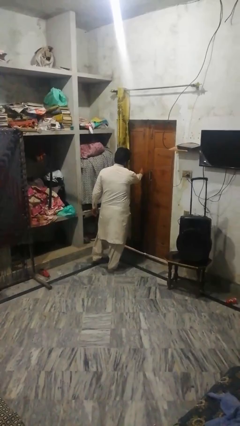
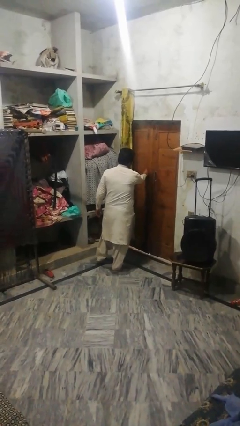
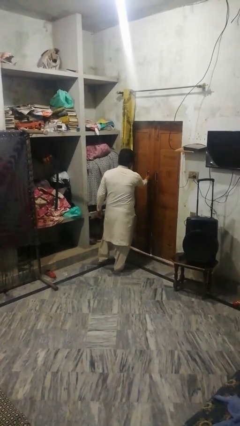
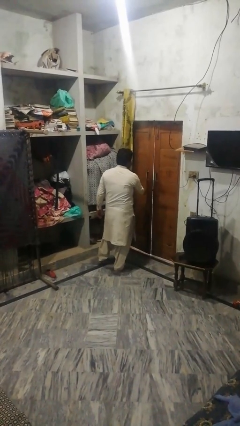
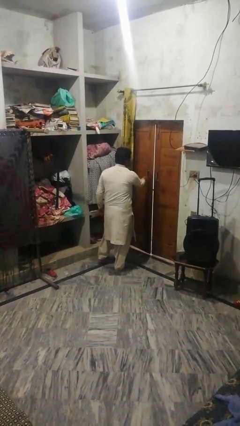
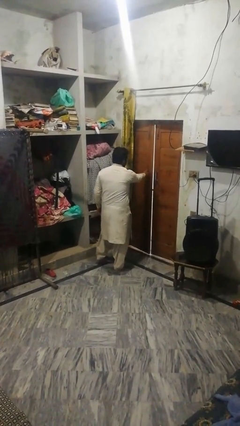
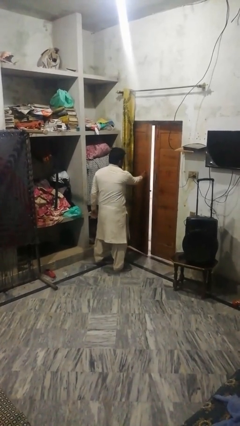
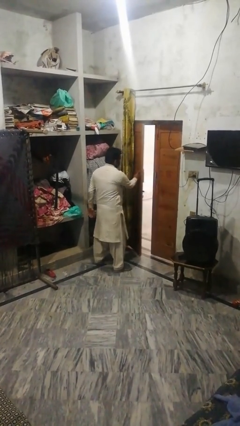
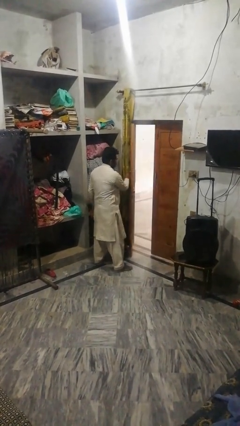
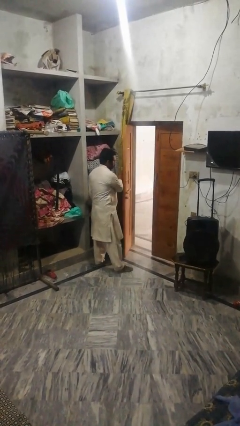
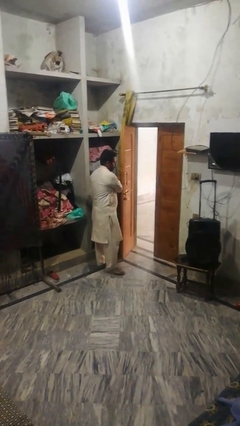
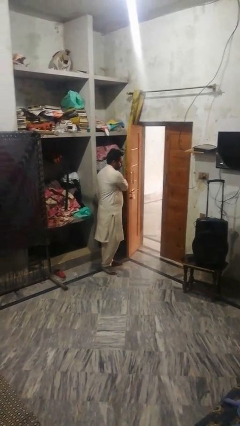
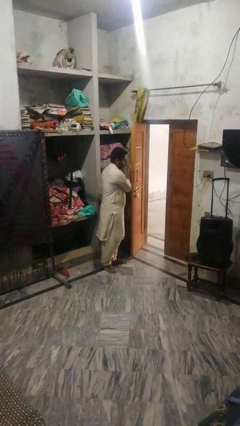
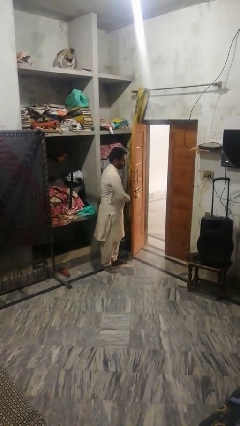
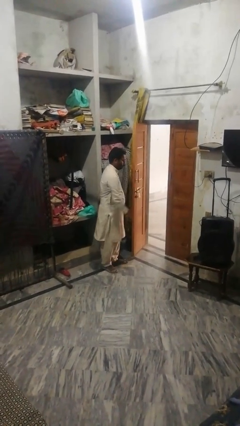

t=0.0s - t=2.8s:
person opens facility door

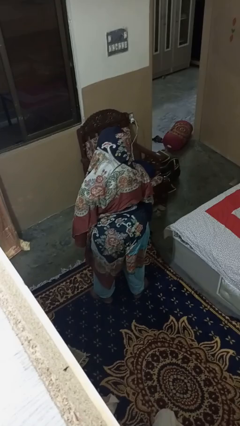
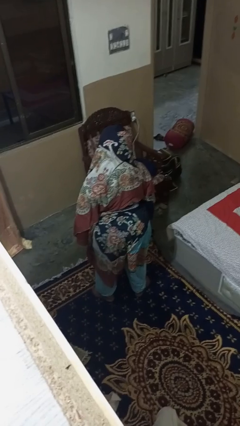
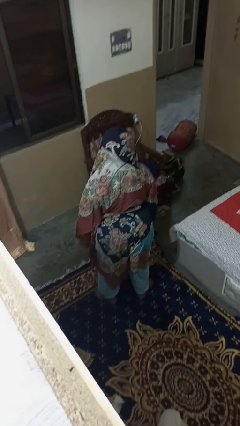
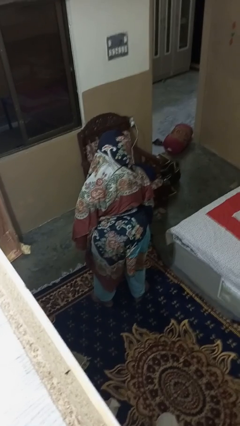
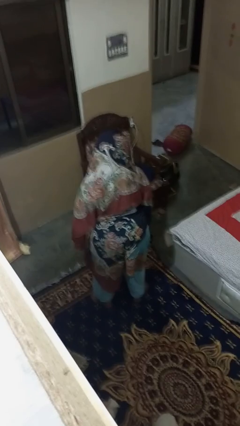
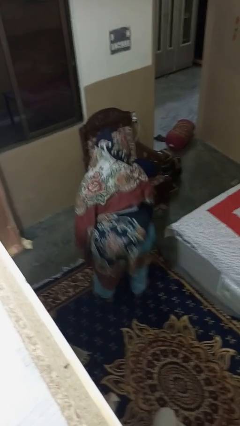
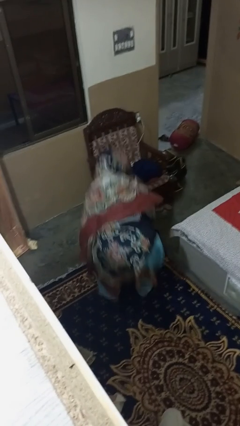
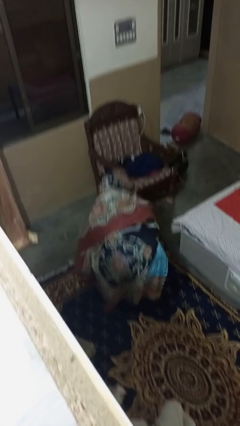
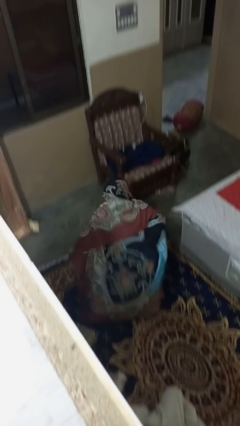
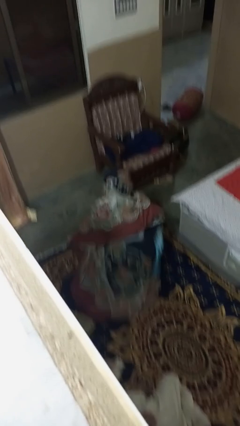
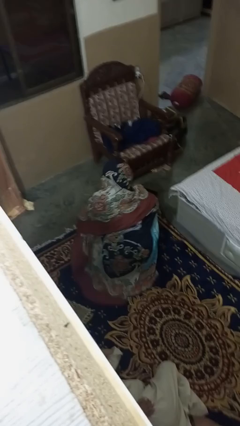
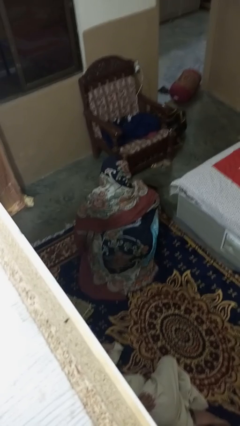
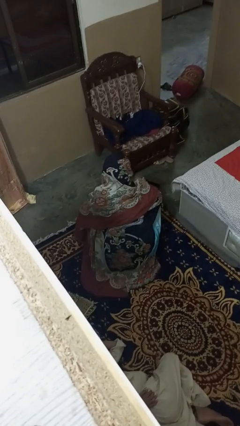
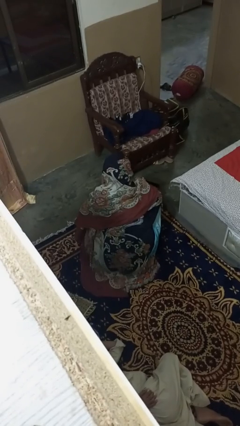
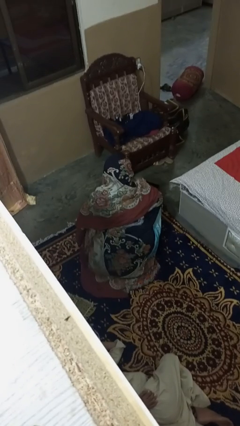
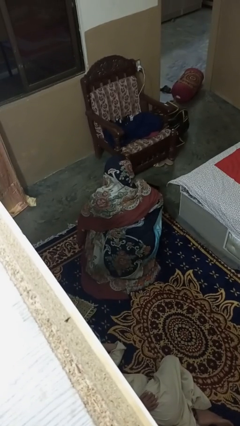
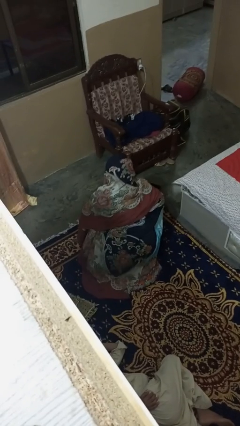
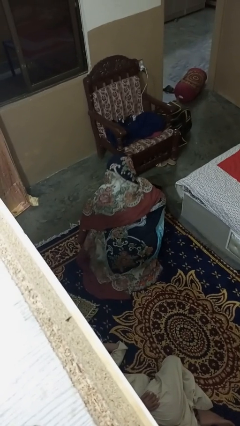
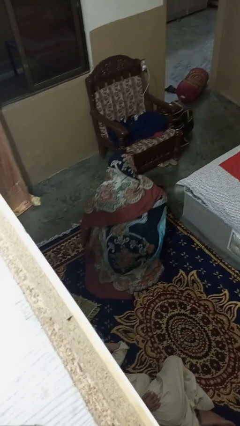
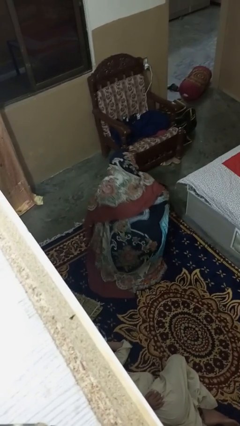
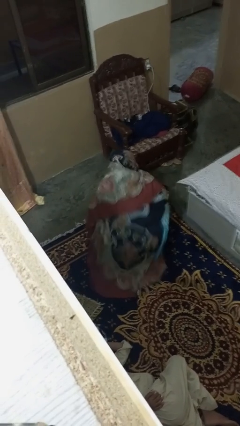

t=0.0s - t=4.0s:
person squats

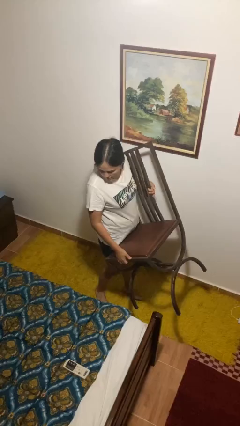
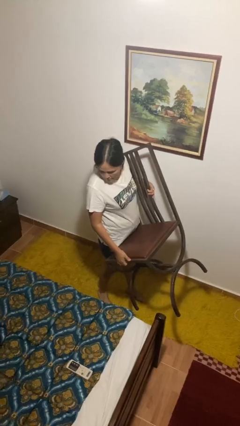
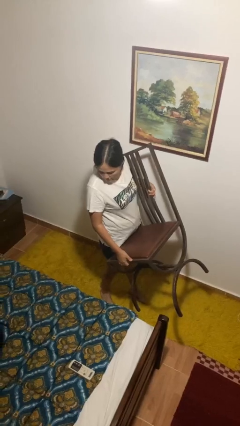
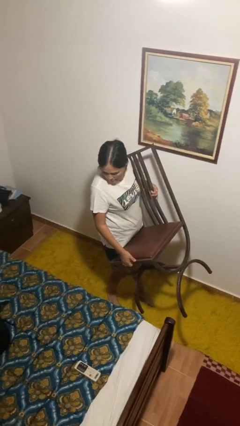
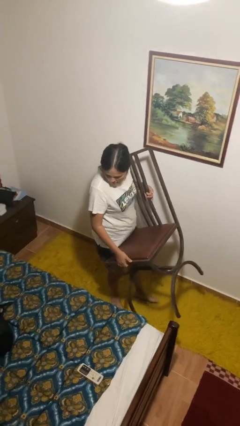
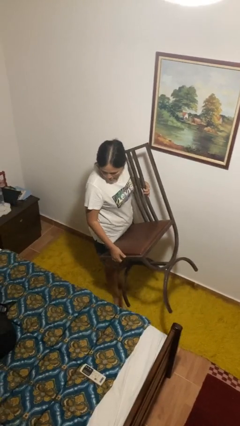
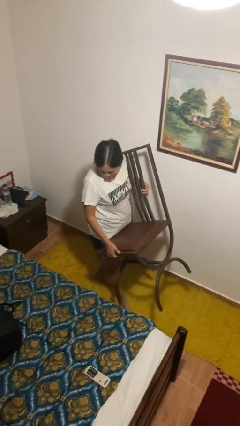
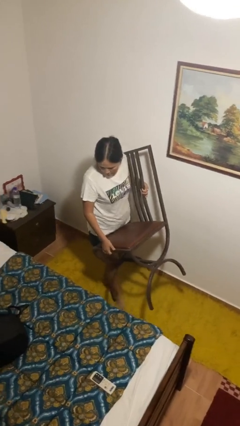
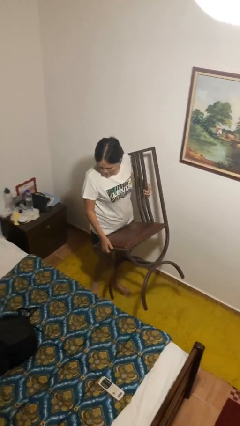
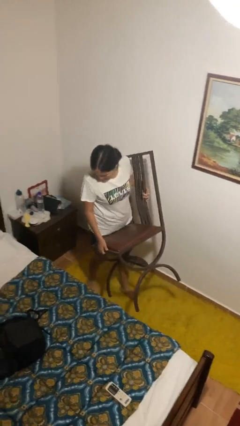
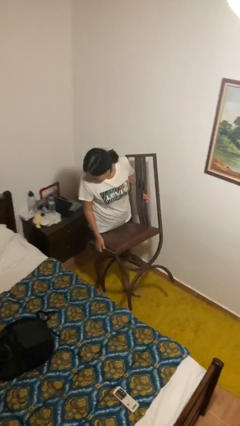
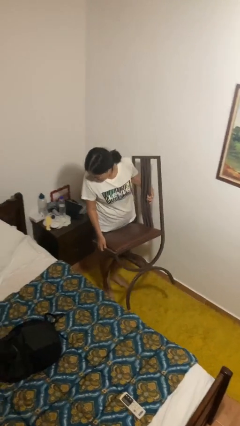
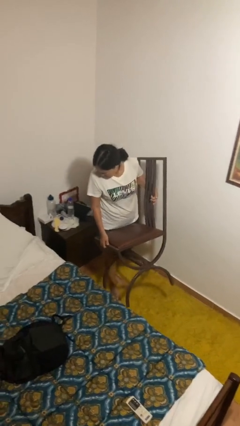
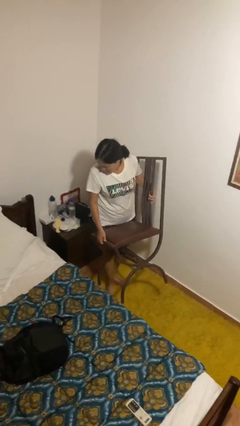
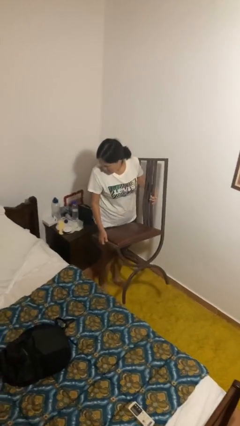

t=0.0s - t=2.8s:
person carries furniture

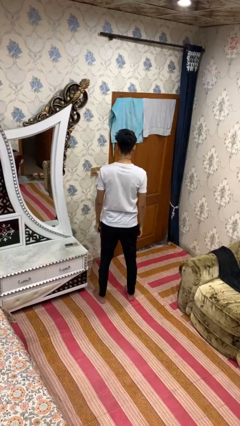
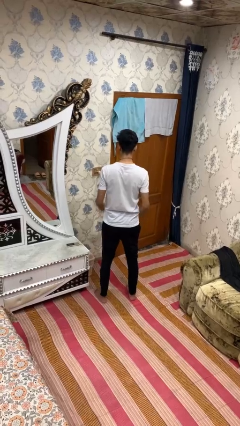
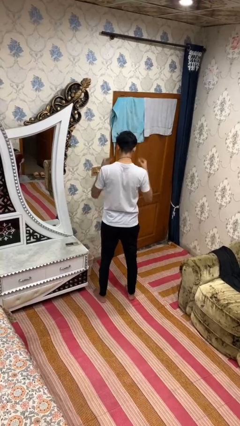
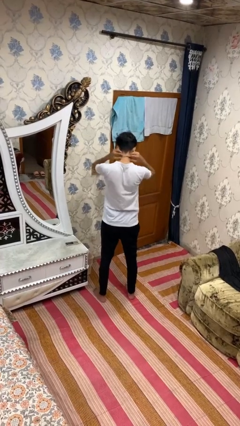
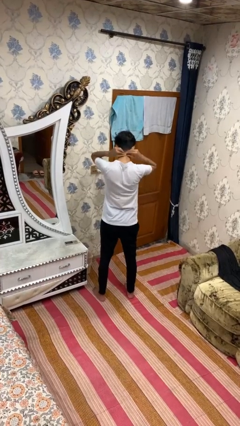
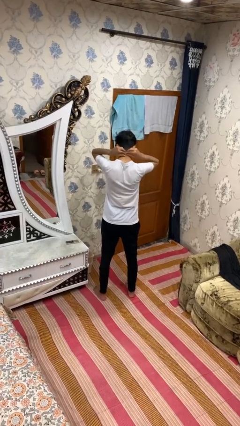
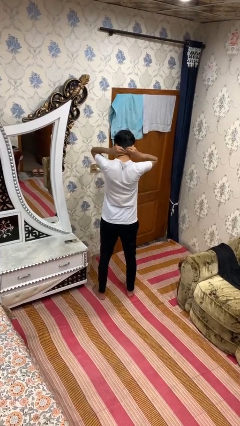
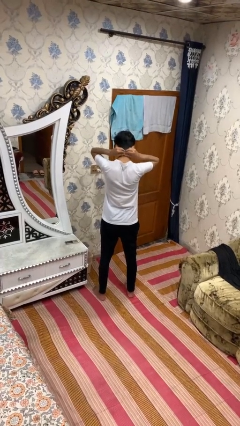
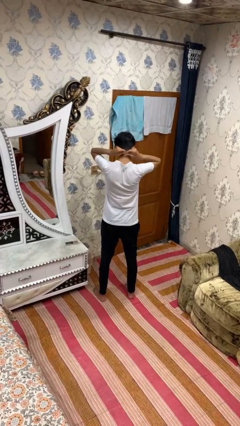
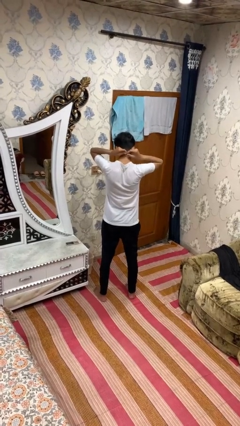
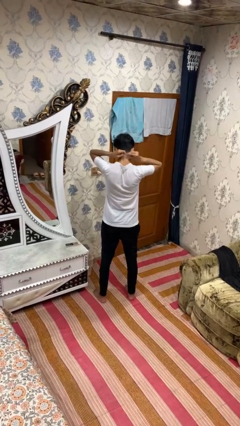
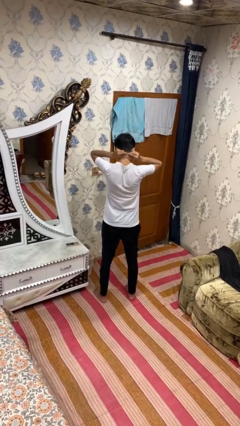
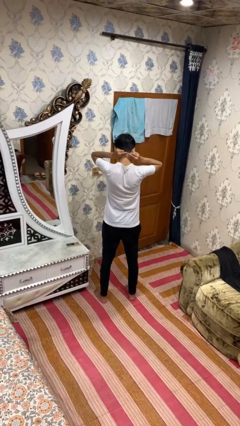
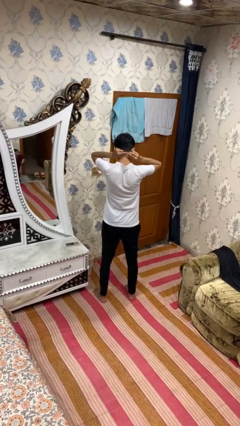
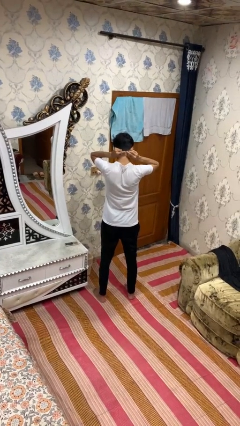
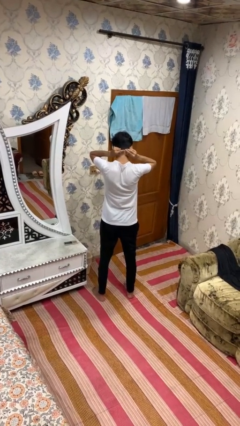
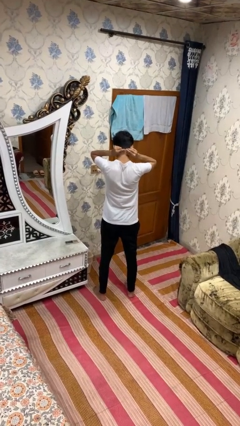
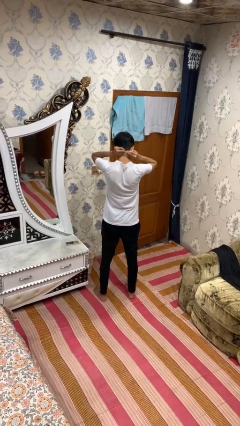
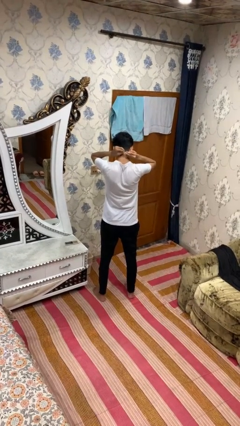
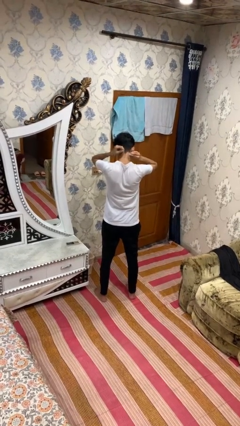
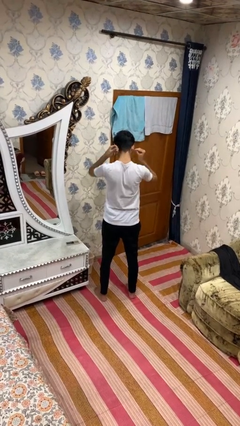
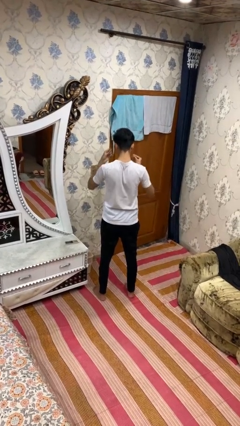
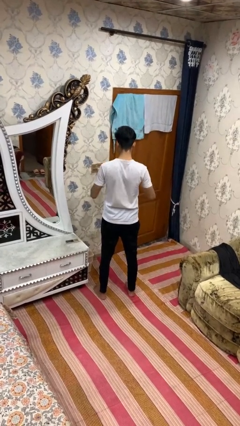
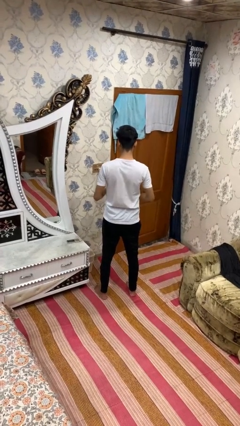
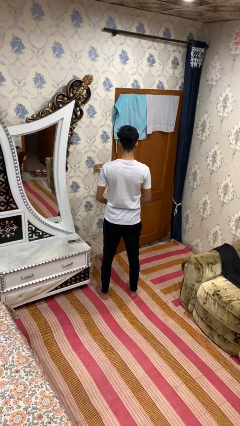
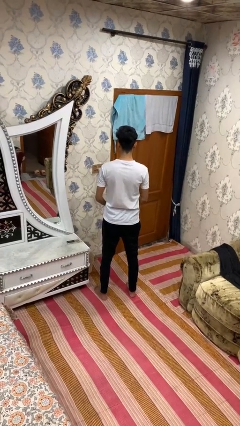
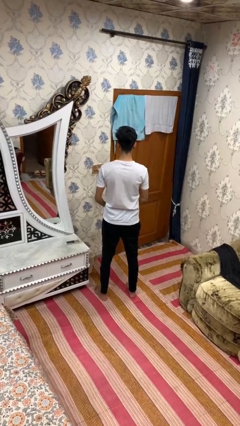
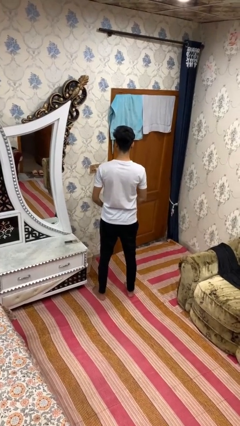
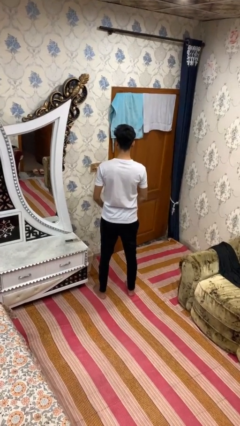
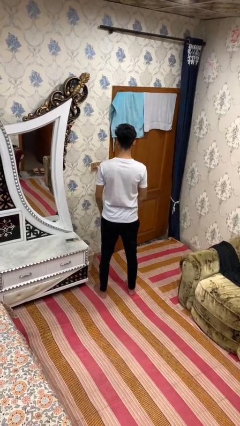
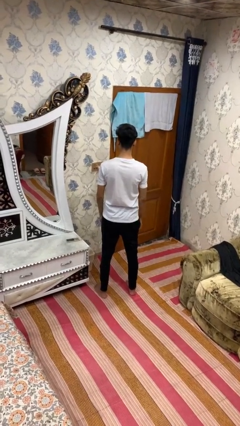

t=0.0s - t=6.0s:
person takes off necklace

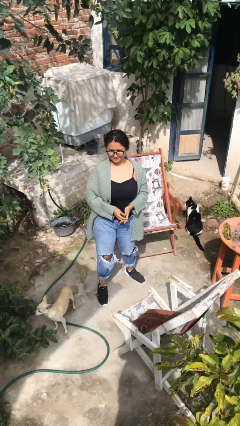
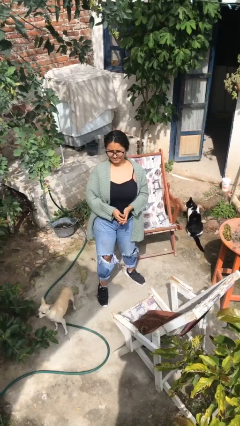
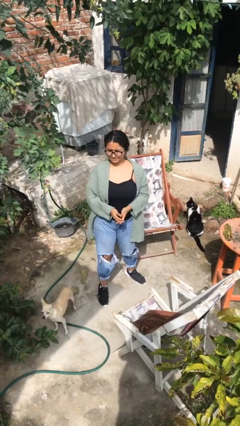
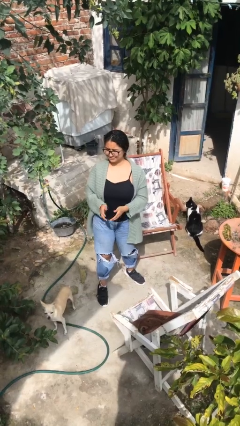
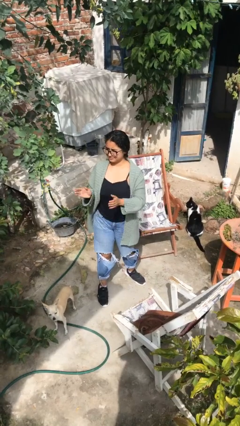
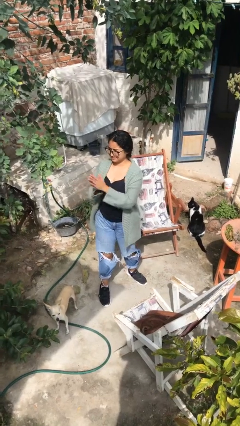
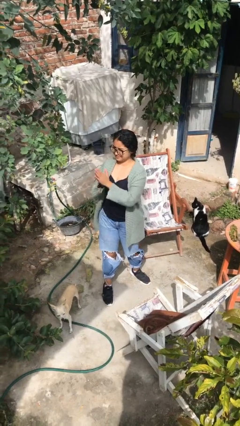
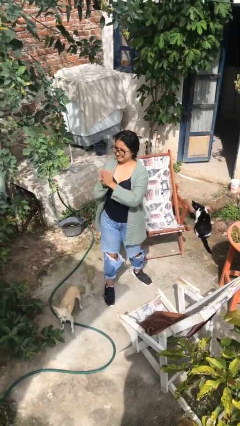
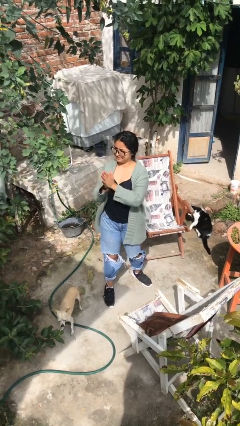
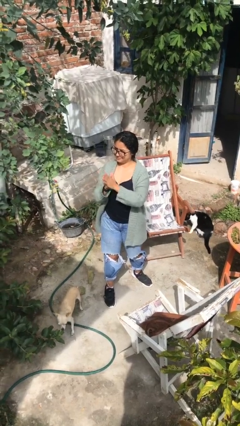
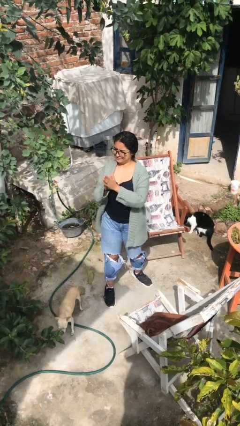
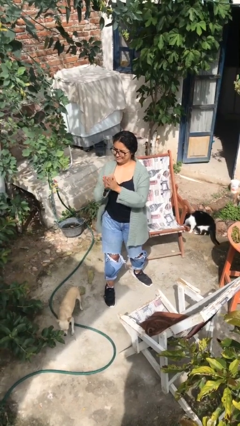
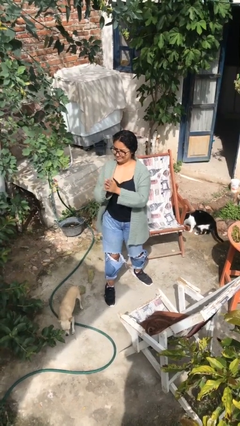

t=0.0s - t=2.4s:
person claps hands
